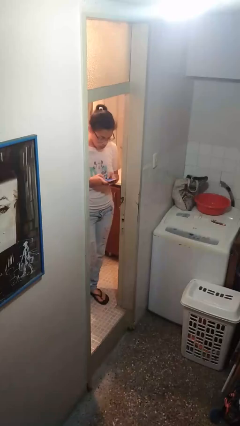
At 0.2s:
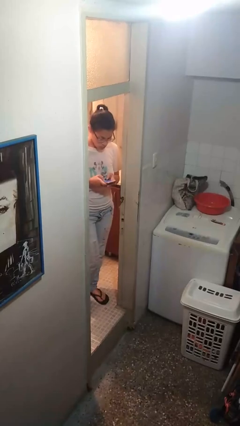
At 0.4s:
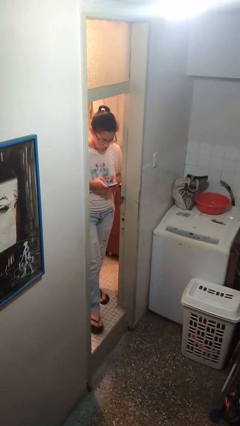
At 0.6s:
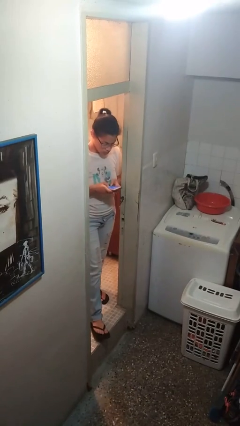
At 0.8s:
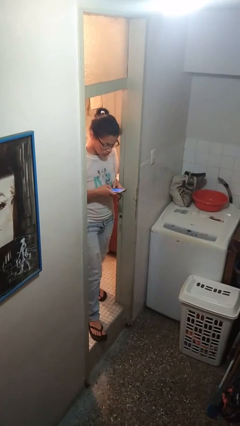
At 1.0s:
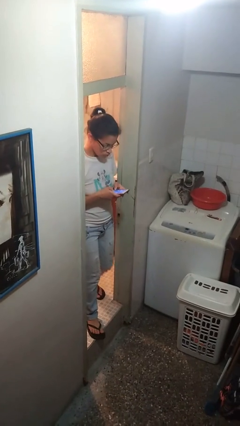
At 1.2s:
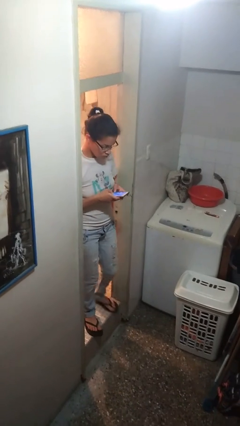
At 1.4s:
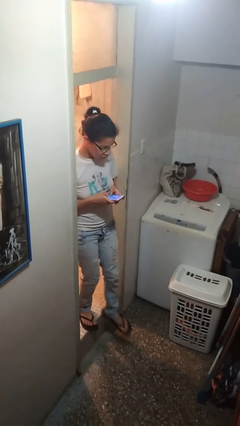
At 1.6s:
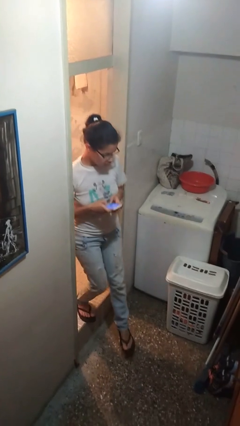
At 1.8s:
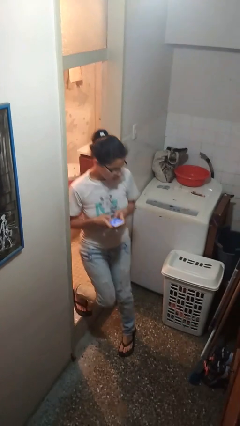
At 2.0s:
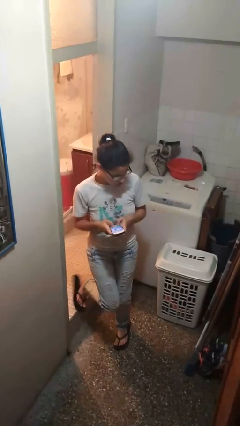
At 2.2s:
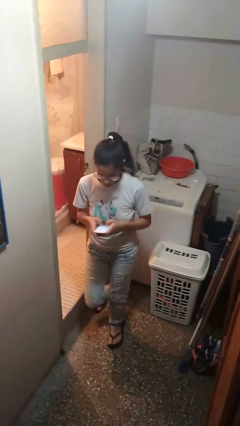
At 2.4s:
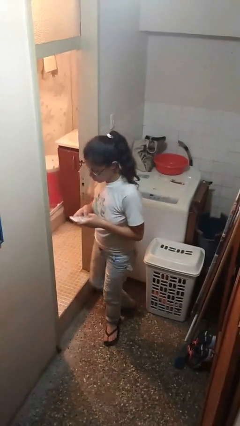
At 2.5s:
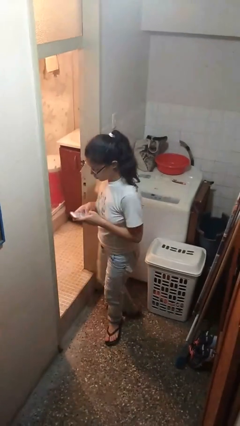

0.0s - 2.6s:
person enters scene through structure

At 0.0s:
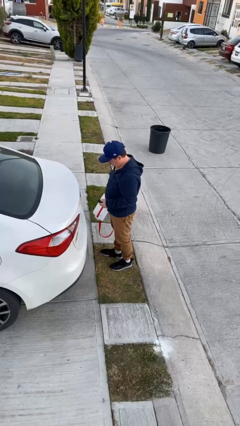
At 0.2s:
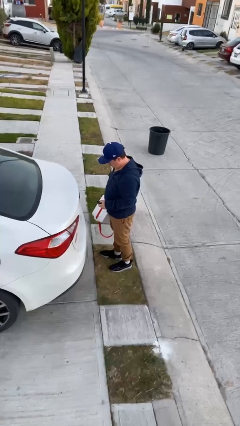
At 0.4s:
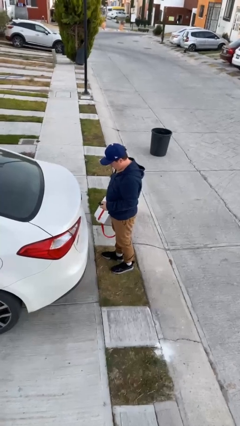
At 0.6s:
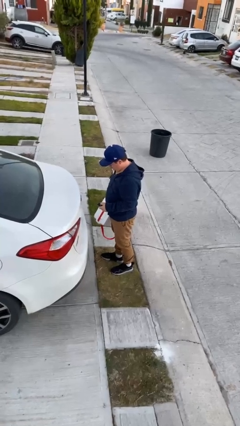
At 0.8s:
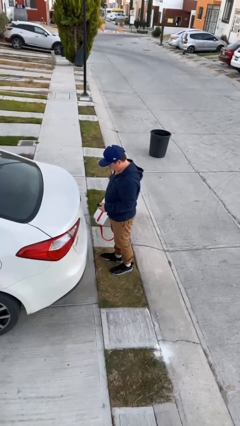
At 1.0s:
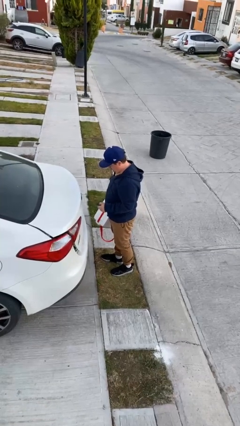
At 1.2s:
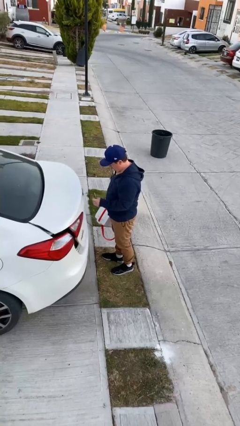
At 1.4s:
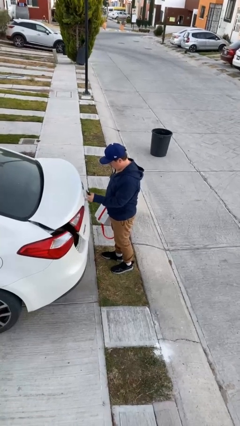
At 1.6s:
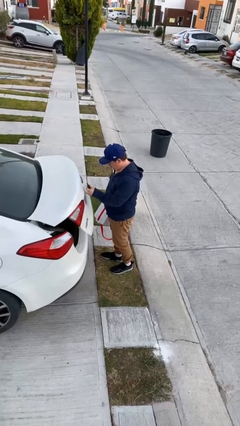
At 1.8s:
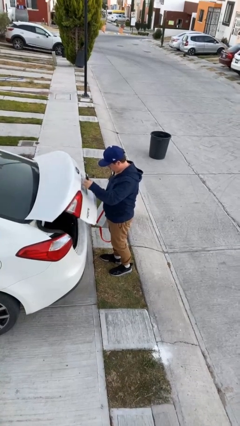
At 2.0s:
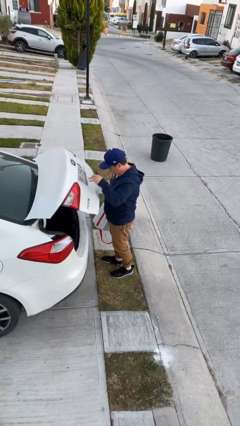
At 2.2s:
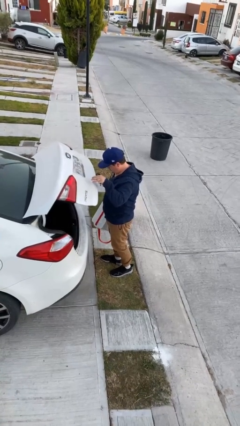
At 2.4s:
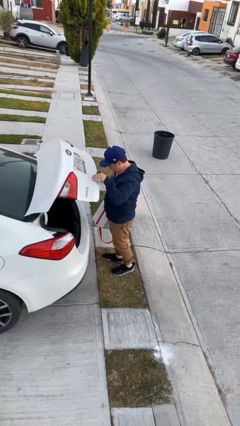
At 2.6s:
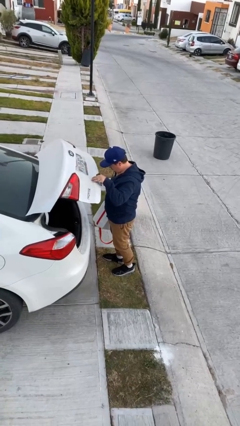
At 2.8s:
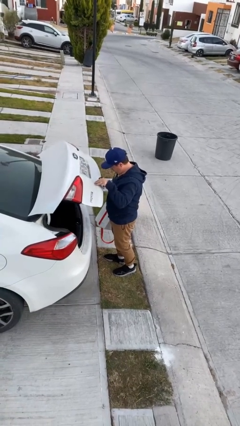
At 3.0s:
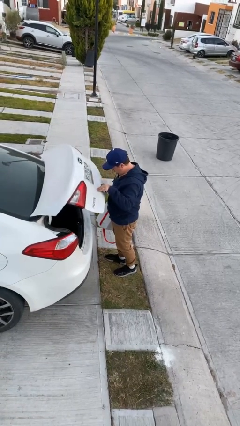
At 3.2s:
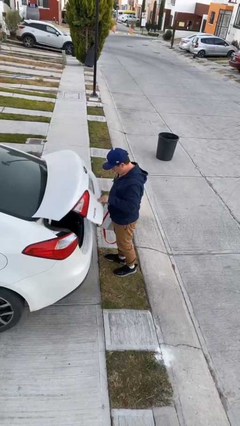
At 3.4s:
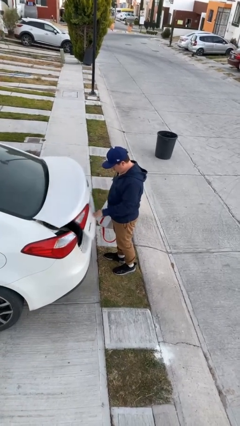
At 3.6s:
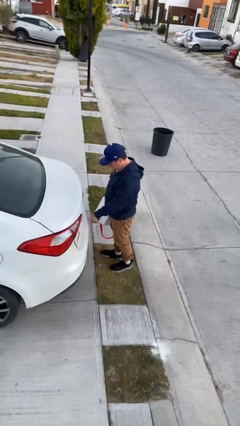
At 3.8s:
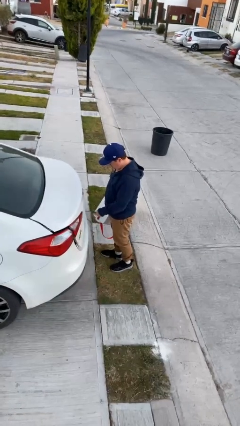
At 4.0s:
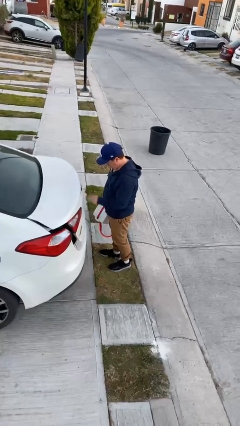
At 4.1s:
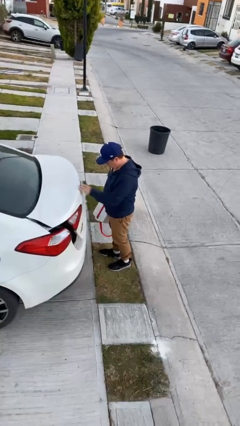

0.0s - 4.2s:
person opens car trunk

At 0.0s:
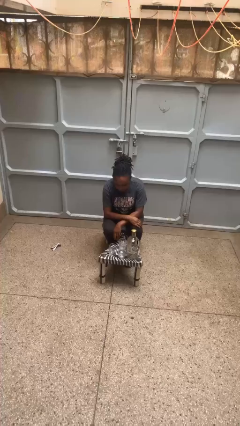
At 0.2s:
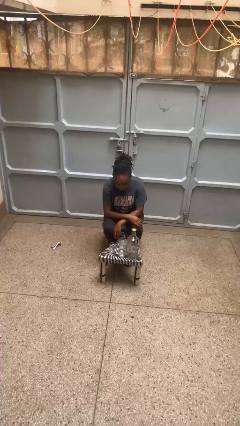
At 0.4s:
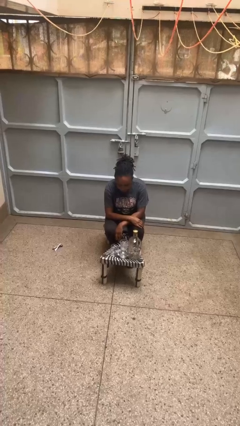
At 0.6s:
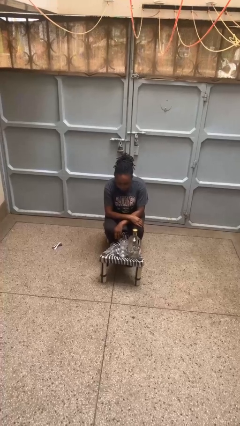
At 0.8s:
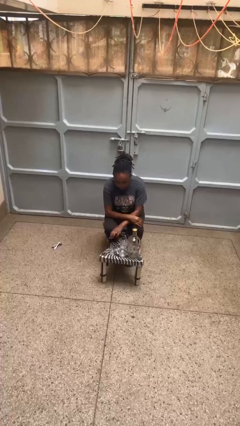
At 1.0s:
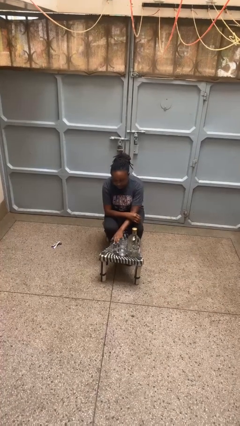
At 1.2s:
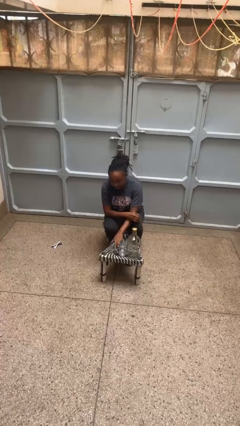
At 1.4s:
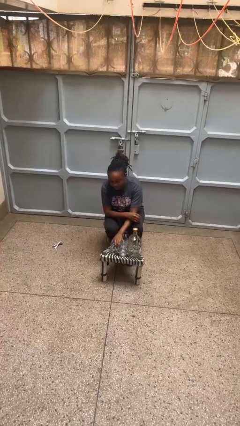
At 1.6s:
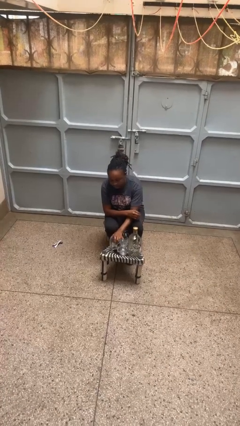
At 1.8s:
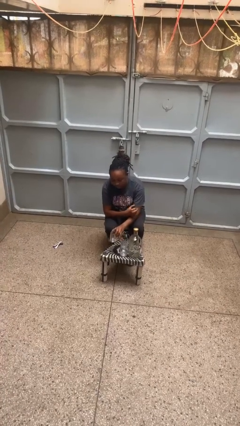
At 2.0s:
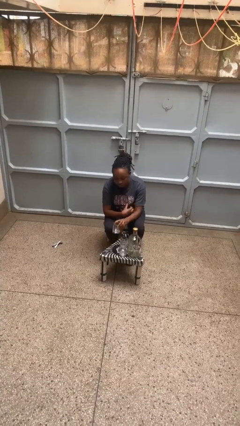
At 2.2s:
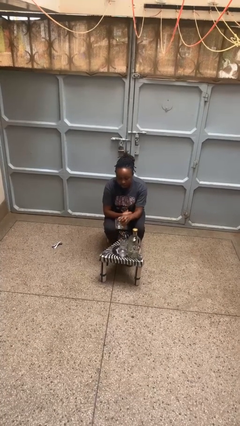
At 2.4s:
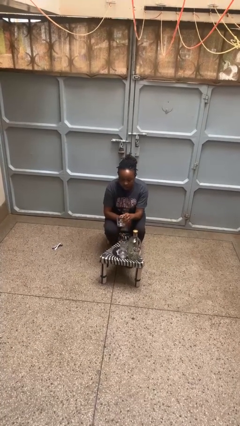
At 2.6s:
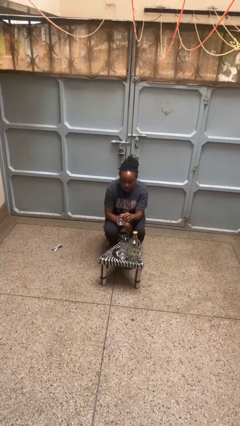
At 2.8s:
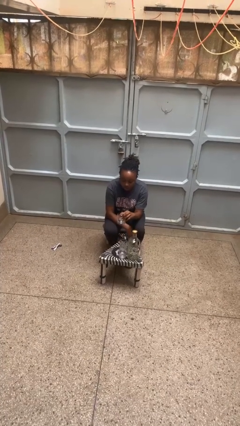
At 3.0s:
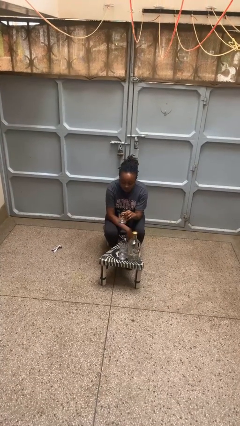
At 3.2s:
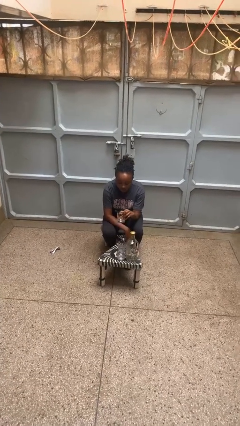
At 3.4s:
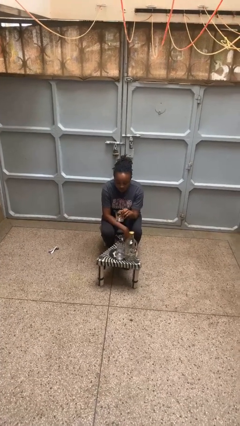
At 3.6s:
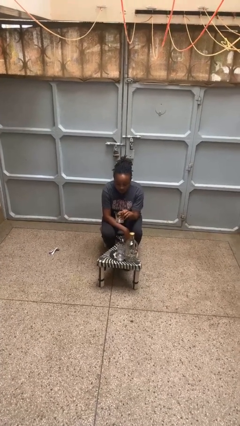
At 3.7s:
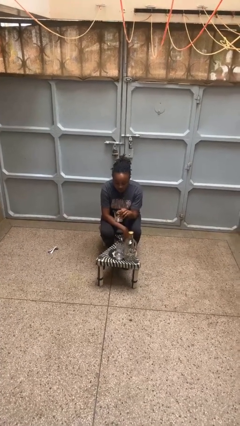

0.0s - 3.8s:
person picks up object from table

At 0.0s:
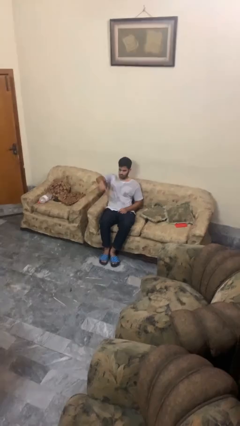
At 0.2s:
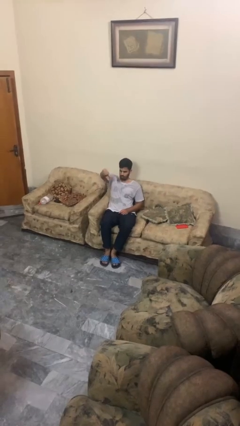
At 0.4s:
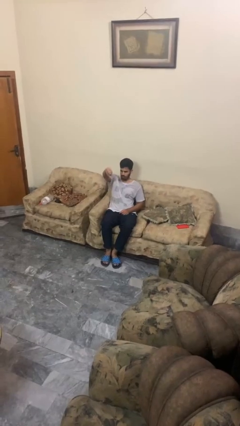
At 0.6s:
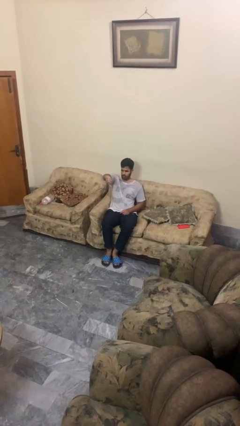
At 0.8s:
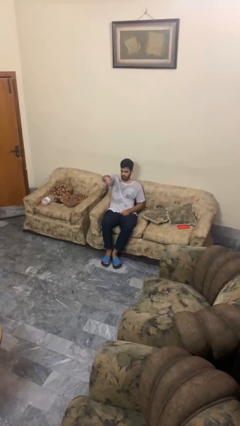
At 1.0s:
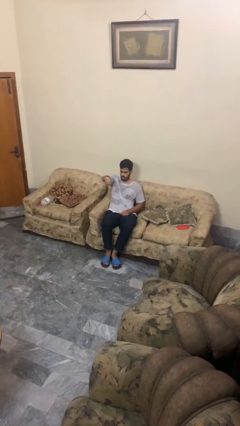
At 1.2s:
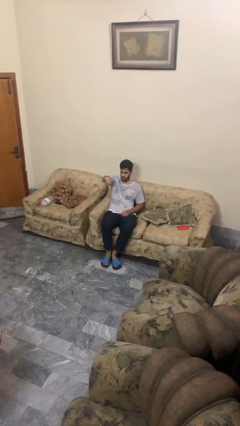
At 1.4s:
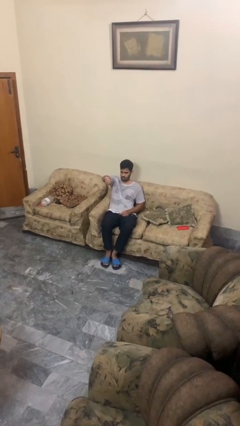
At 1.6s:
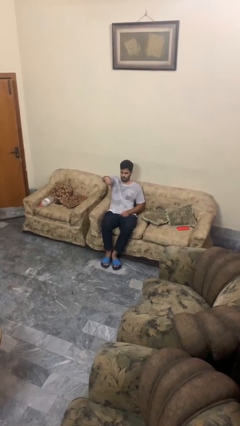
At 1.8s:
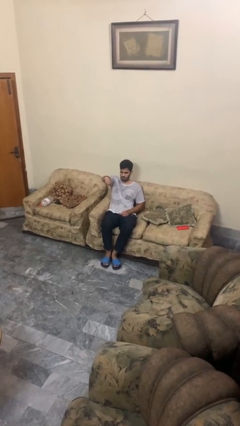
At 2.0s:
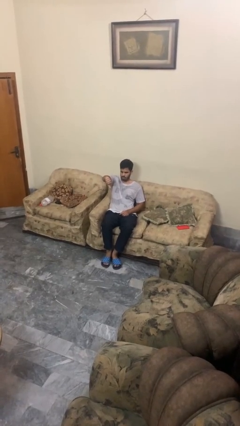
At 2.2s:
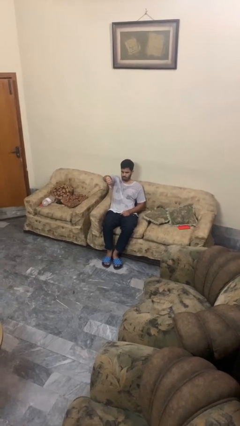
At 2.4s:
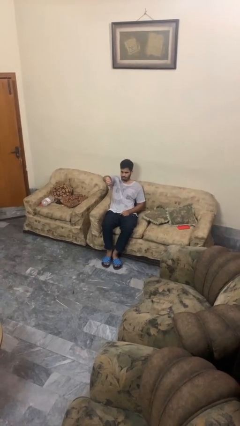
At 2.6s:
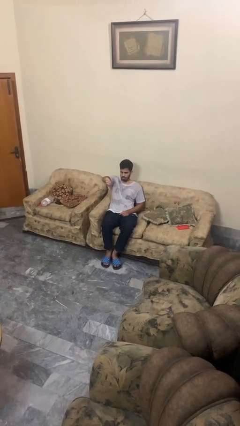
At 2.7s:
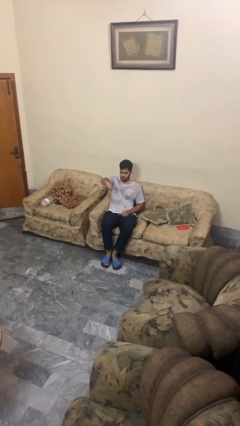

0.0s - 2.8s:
person gestures thumbs down

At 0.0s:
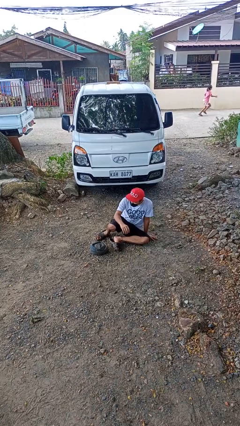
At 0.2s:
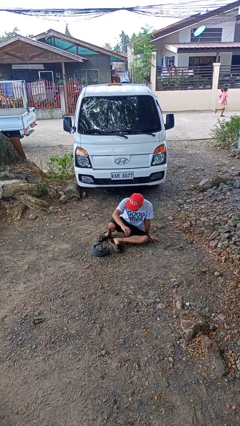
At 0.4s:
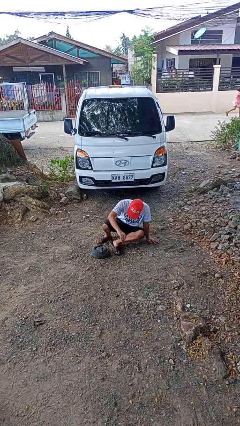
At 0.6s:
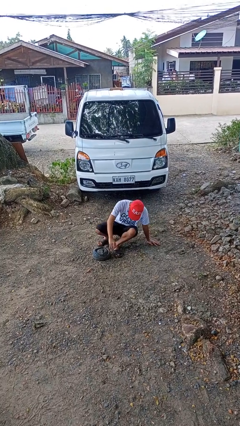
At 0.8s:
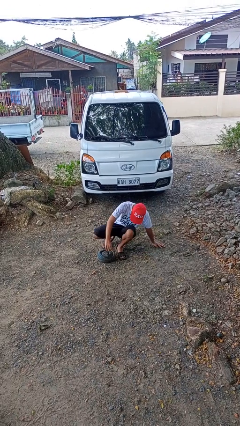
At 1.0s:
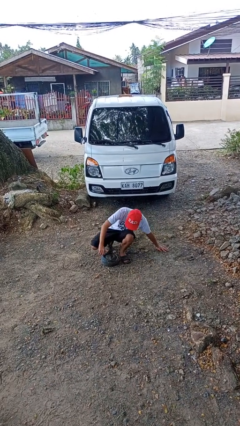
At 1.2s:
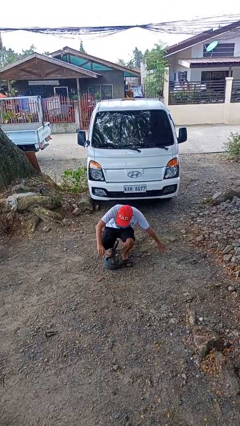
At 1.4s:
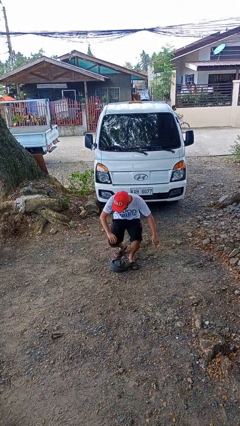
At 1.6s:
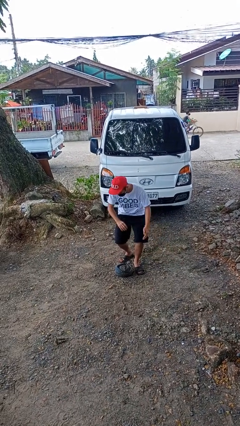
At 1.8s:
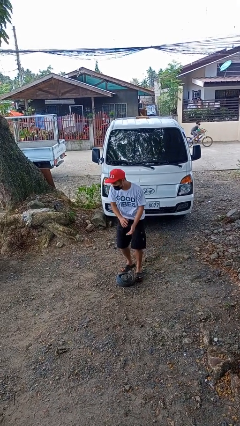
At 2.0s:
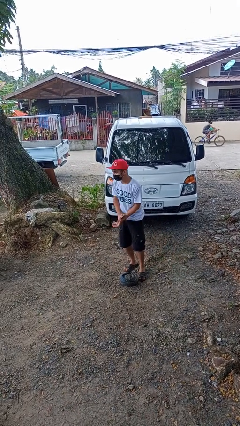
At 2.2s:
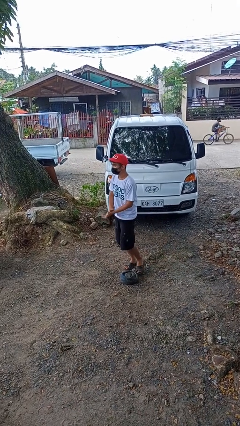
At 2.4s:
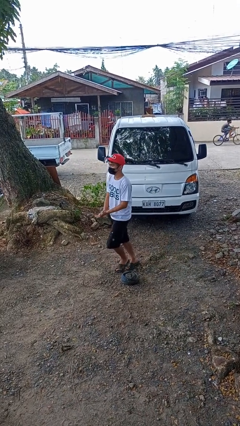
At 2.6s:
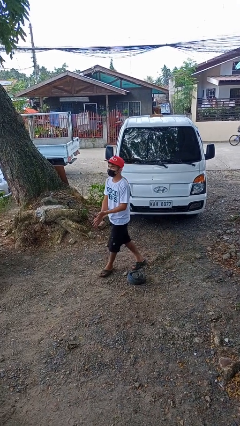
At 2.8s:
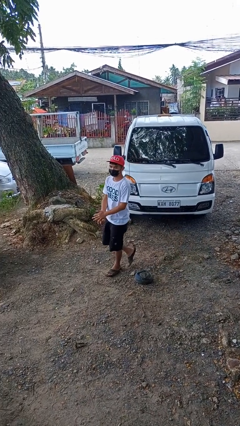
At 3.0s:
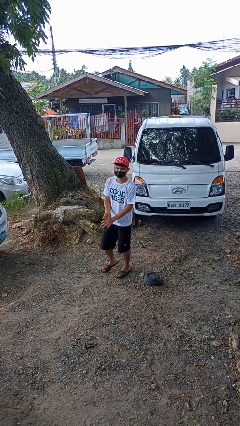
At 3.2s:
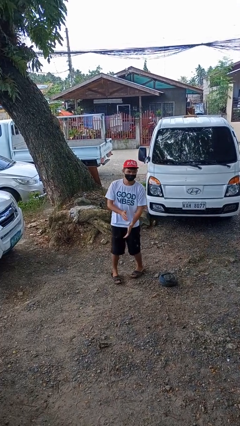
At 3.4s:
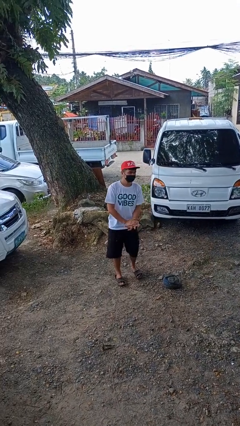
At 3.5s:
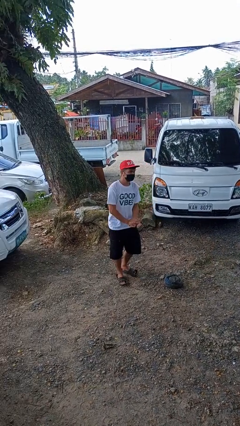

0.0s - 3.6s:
person stands up from floor

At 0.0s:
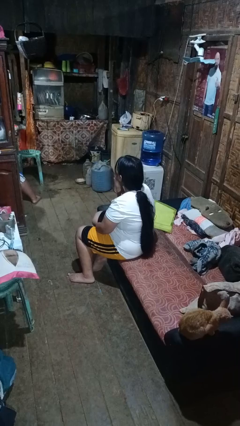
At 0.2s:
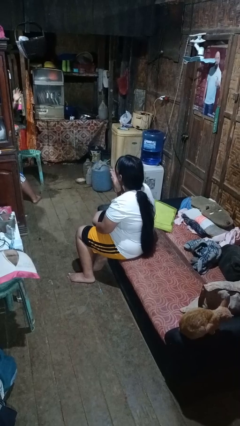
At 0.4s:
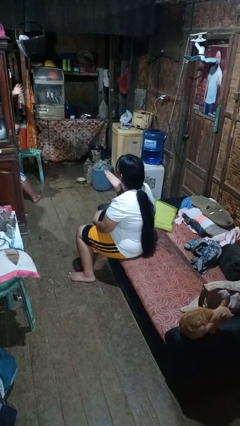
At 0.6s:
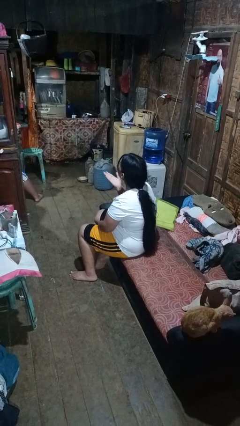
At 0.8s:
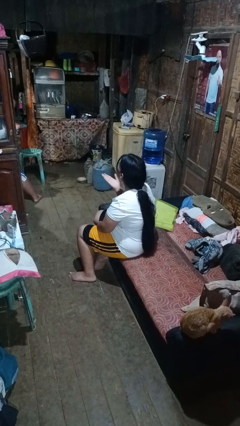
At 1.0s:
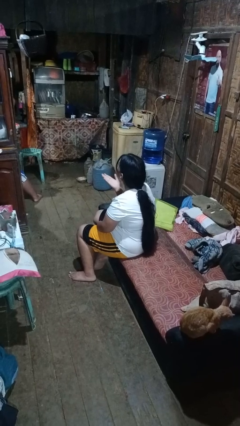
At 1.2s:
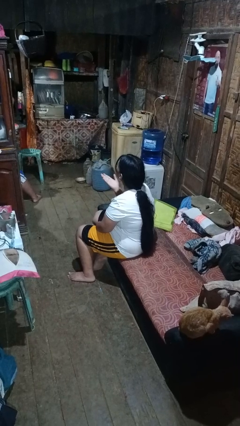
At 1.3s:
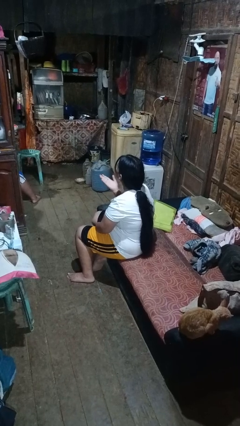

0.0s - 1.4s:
person gestures blow kiss
